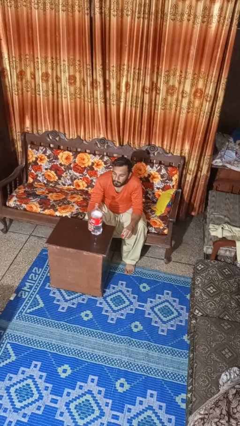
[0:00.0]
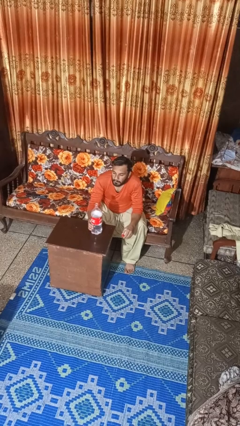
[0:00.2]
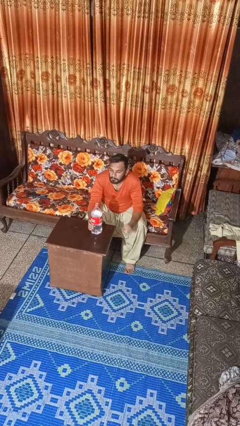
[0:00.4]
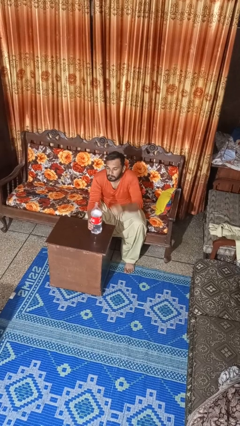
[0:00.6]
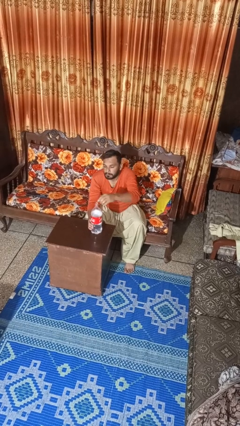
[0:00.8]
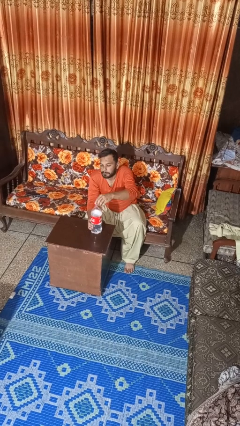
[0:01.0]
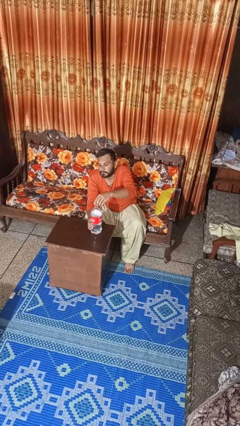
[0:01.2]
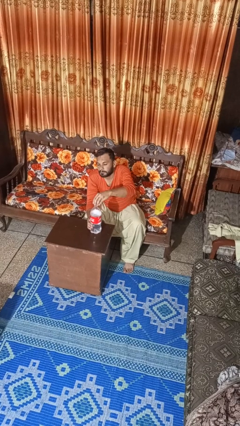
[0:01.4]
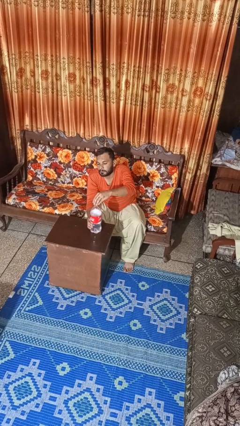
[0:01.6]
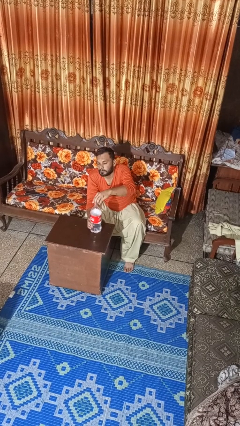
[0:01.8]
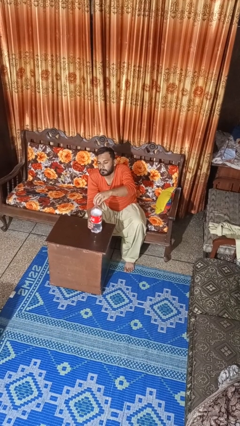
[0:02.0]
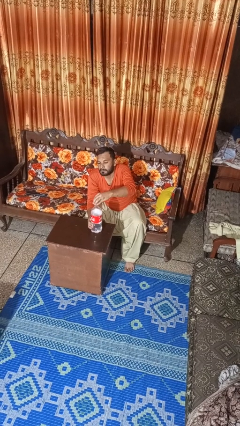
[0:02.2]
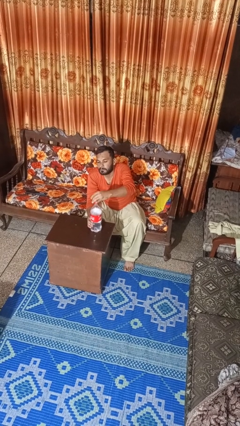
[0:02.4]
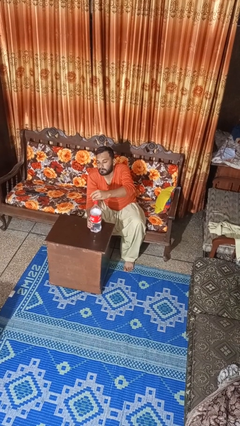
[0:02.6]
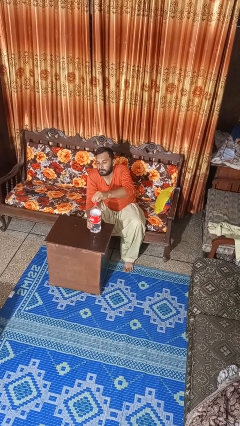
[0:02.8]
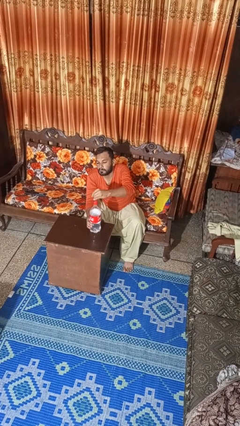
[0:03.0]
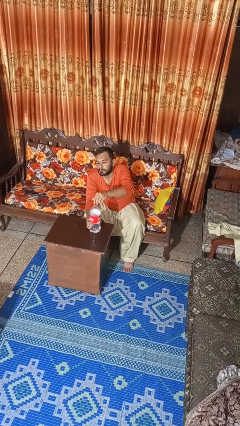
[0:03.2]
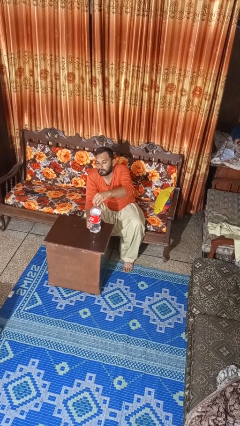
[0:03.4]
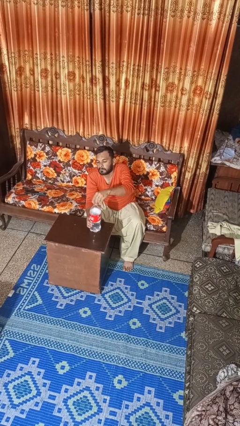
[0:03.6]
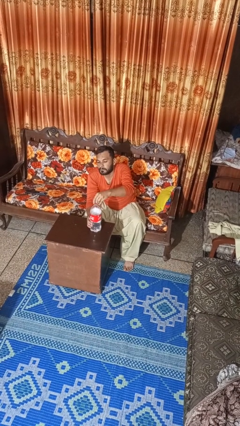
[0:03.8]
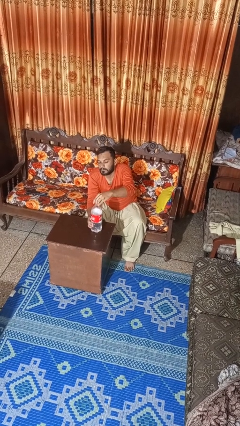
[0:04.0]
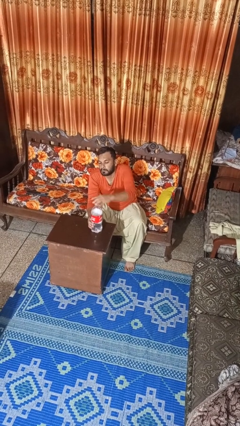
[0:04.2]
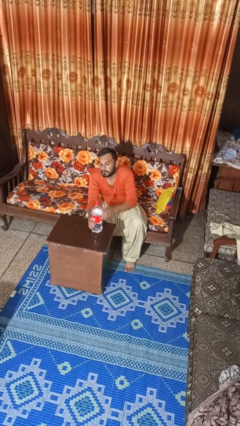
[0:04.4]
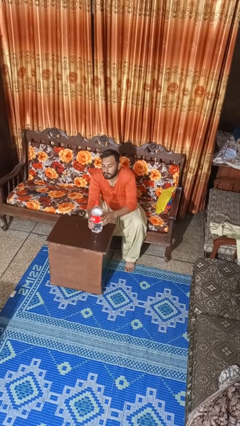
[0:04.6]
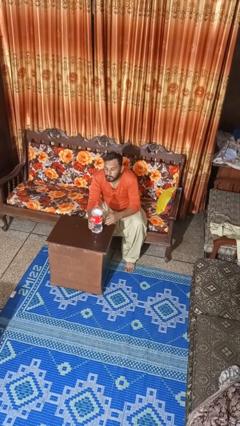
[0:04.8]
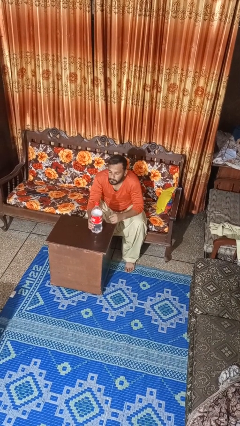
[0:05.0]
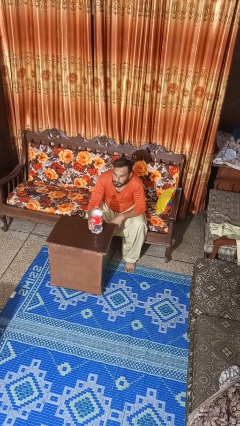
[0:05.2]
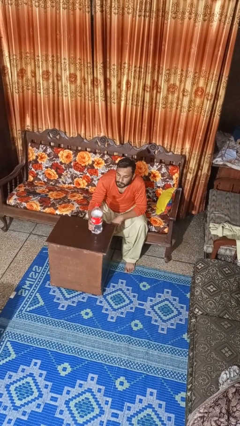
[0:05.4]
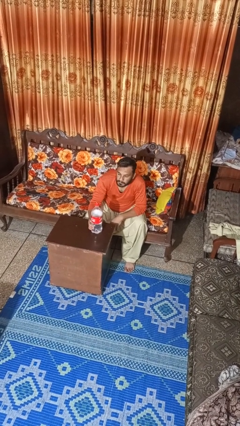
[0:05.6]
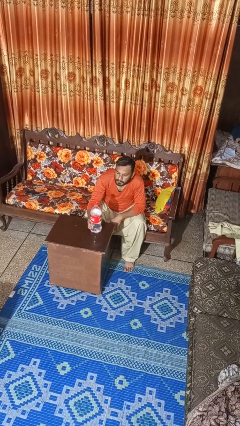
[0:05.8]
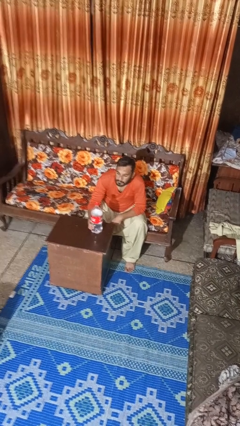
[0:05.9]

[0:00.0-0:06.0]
person screws lid to bottle

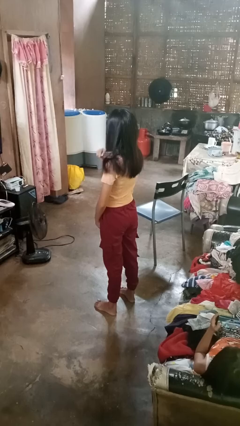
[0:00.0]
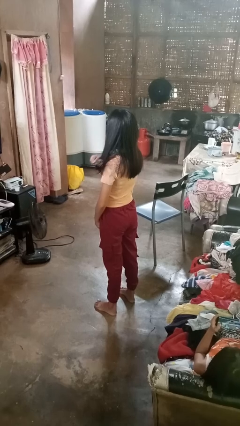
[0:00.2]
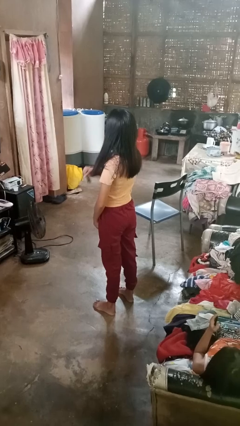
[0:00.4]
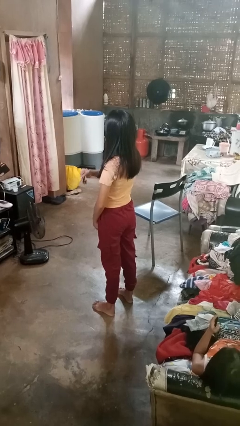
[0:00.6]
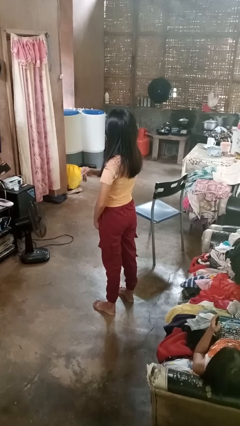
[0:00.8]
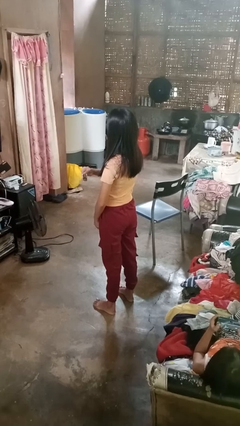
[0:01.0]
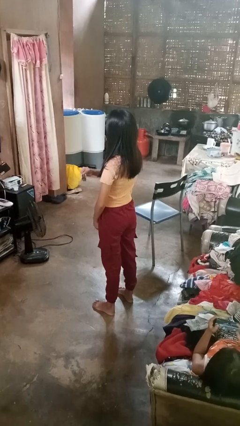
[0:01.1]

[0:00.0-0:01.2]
person brushes hair

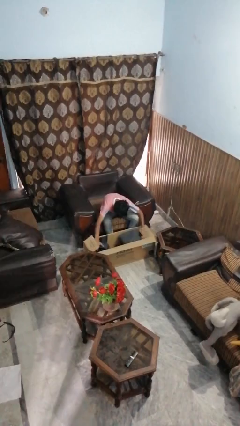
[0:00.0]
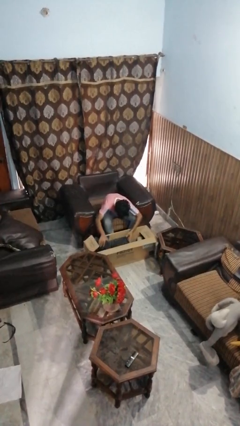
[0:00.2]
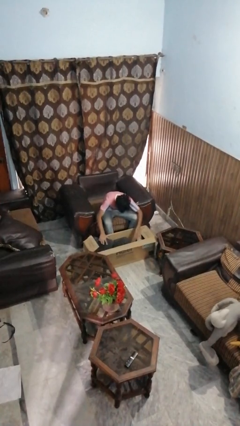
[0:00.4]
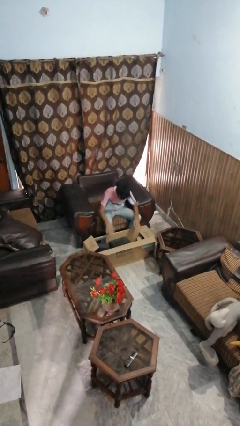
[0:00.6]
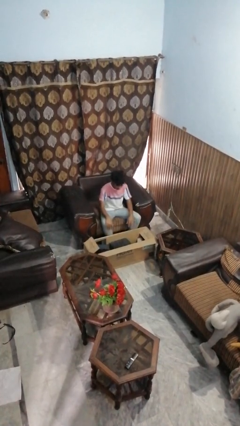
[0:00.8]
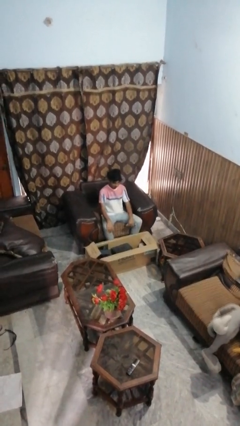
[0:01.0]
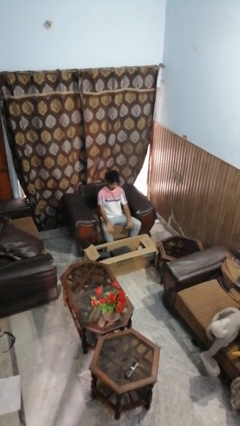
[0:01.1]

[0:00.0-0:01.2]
person searches in box

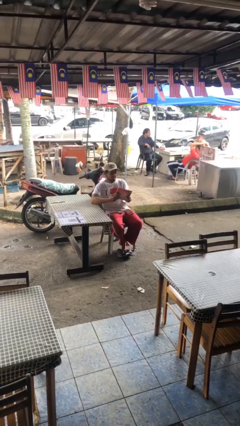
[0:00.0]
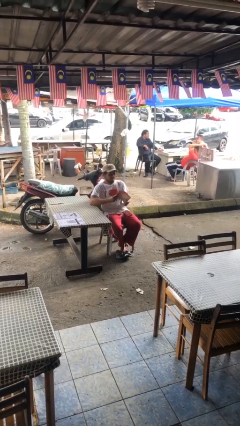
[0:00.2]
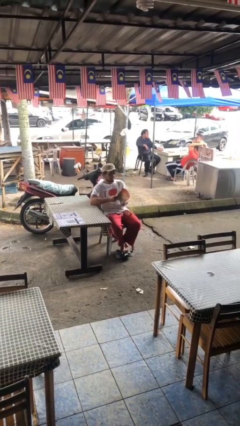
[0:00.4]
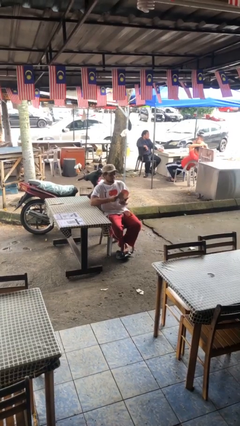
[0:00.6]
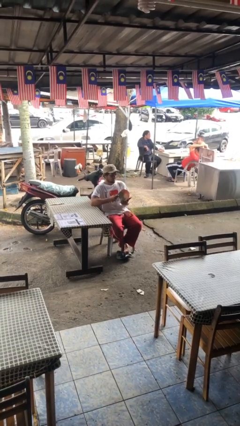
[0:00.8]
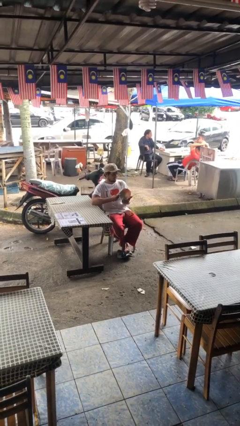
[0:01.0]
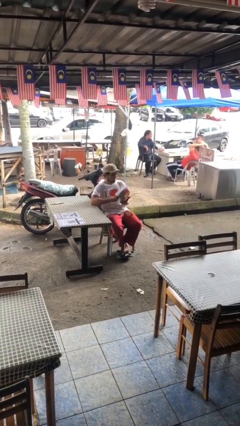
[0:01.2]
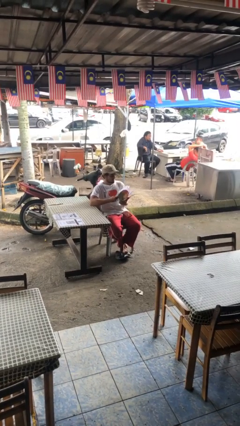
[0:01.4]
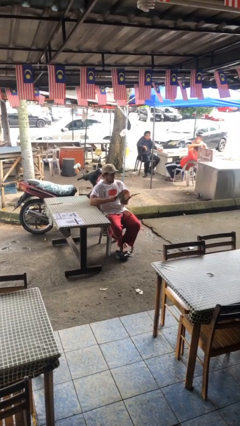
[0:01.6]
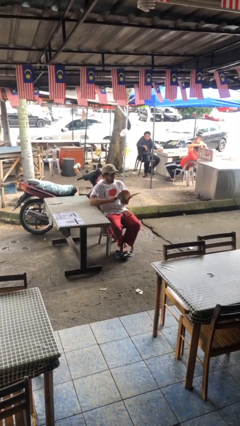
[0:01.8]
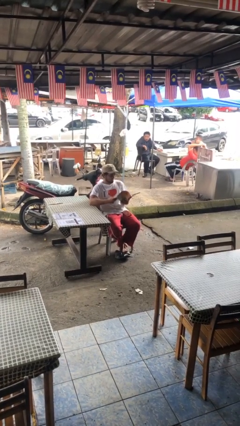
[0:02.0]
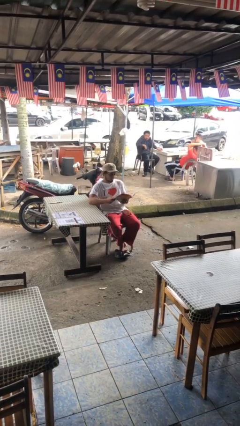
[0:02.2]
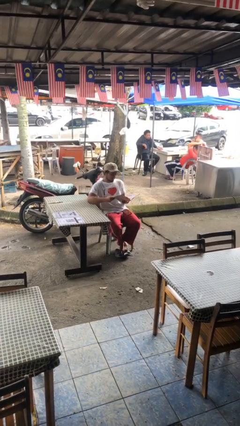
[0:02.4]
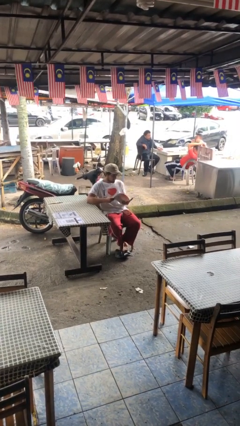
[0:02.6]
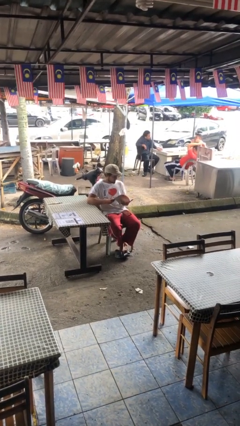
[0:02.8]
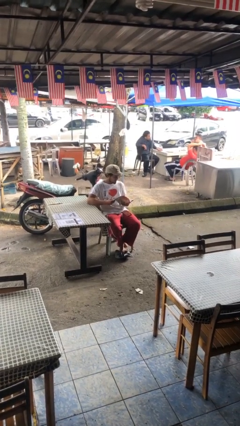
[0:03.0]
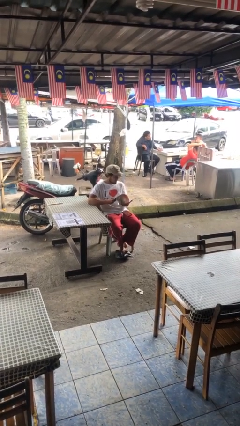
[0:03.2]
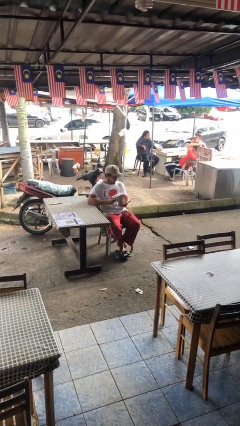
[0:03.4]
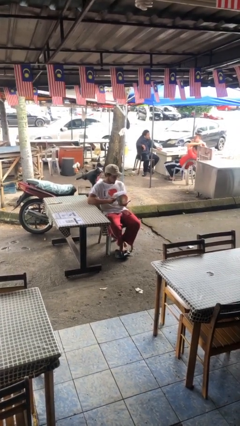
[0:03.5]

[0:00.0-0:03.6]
person reads document

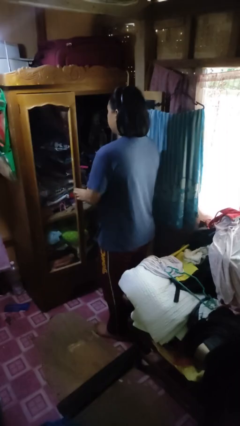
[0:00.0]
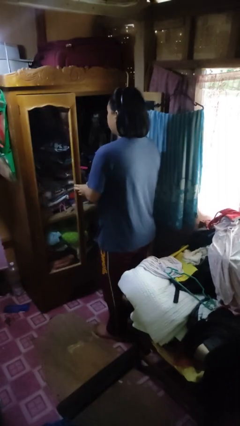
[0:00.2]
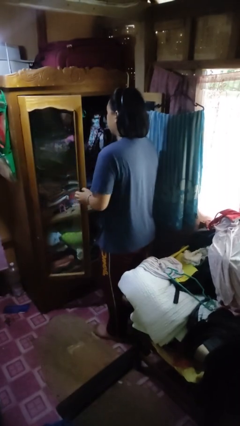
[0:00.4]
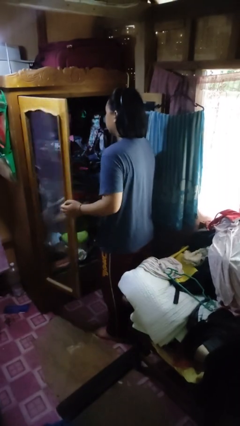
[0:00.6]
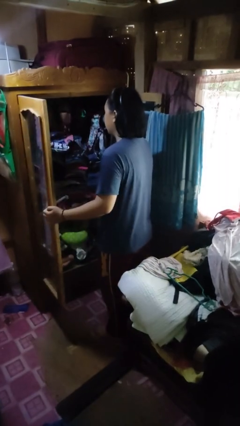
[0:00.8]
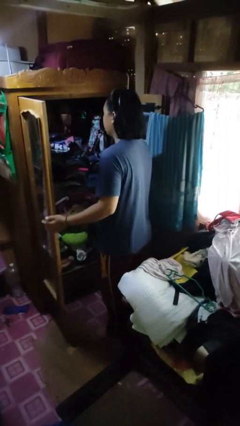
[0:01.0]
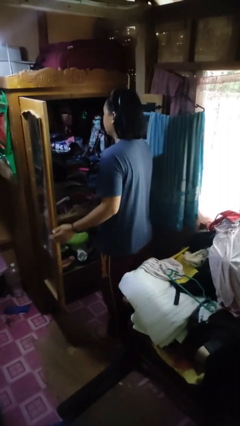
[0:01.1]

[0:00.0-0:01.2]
person opens closet door

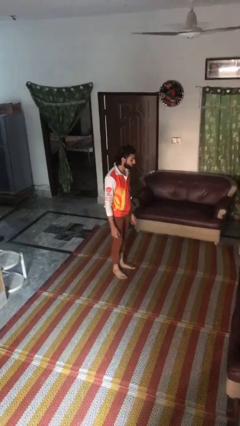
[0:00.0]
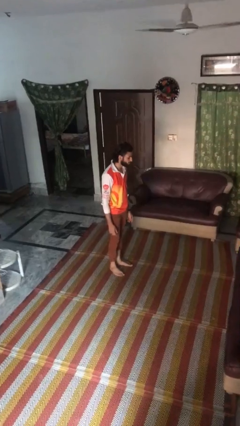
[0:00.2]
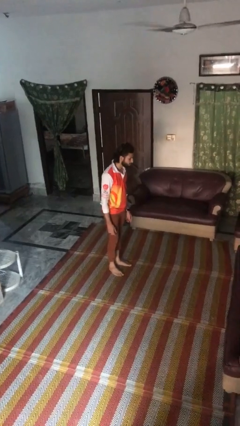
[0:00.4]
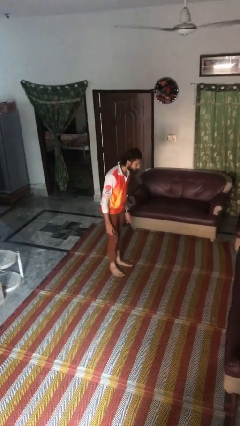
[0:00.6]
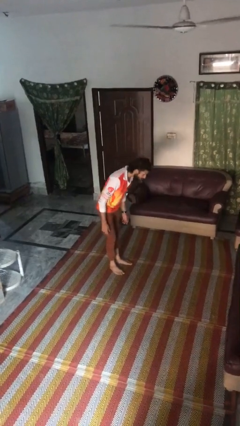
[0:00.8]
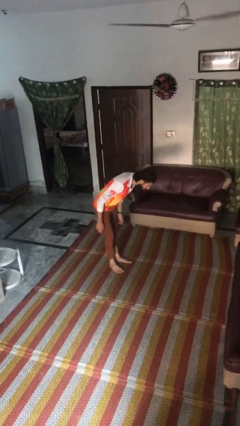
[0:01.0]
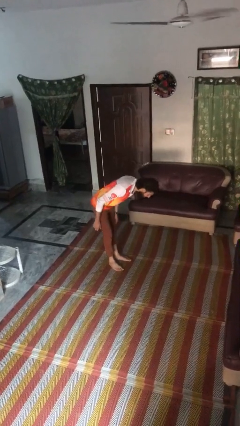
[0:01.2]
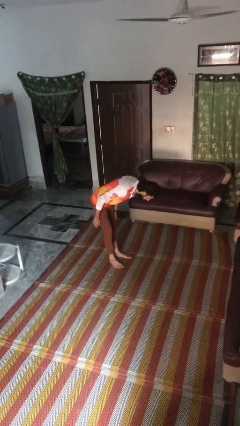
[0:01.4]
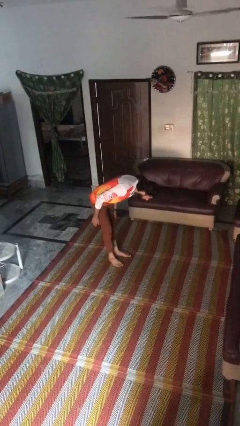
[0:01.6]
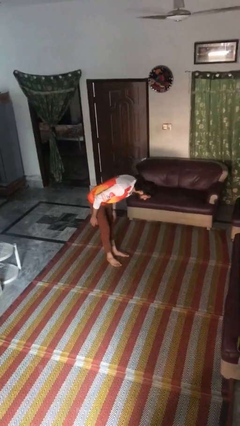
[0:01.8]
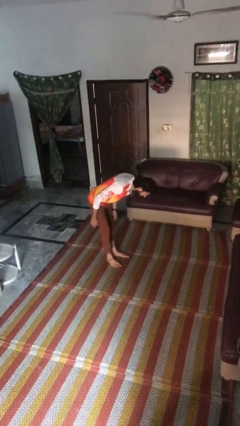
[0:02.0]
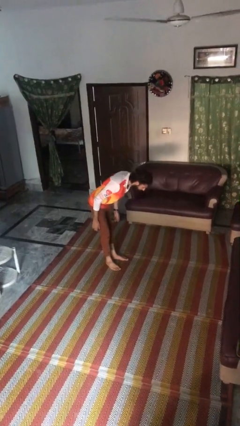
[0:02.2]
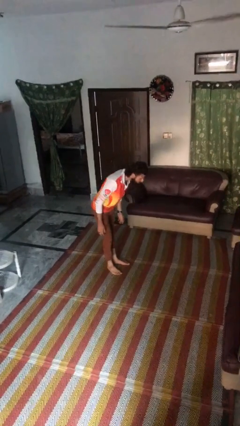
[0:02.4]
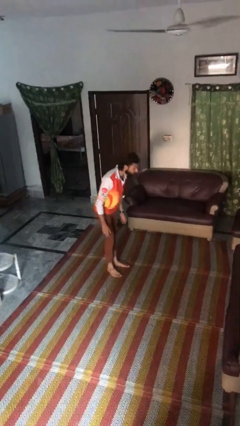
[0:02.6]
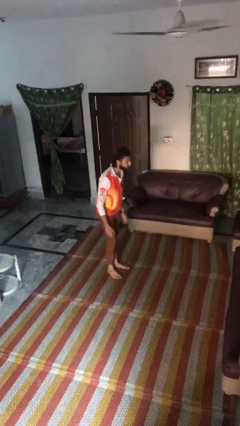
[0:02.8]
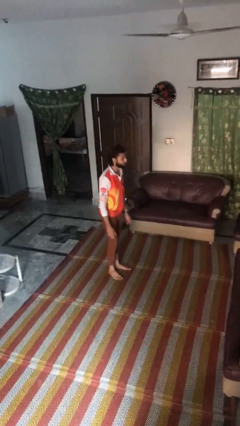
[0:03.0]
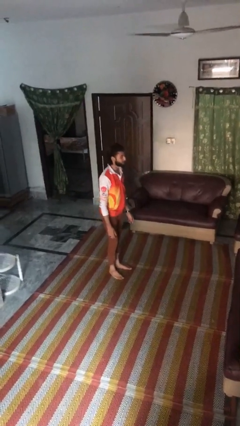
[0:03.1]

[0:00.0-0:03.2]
person bows

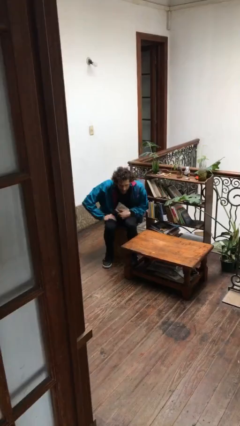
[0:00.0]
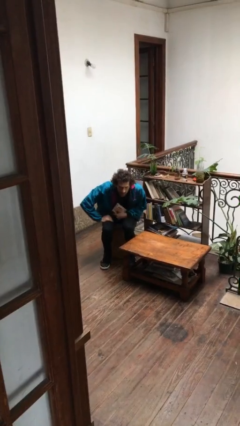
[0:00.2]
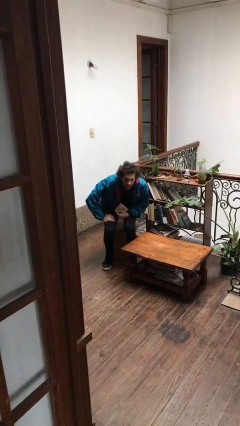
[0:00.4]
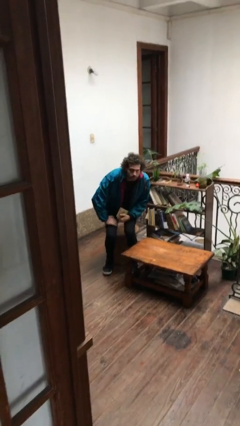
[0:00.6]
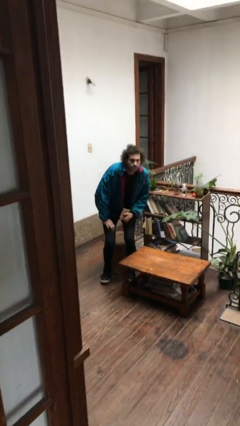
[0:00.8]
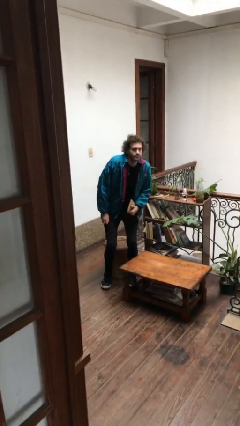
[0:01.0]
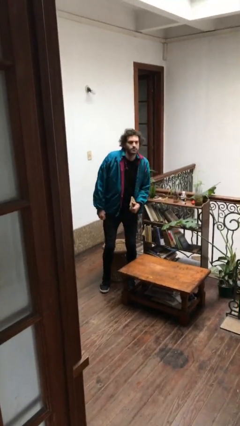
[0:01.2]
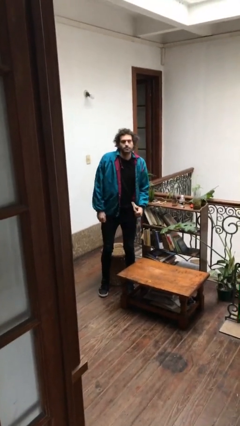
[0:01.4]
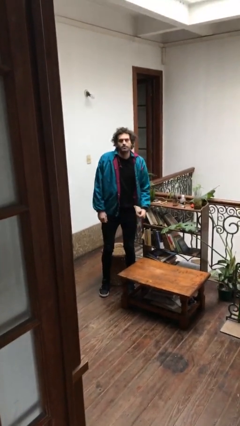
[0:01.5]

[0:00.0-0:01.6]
person stands up
